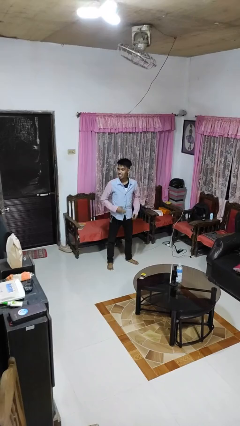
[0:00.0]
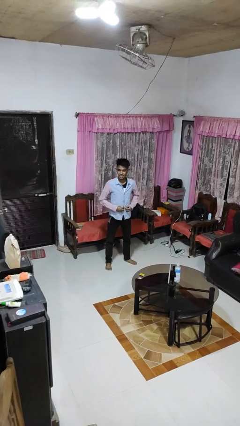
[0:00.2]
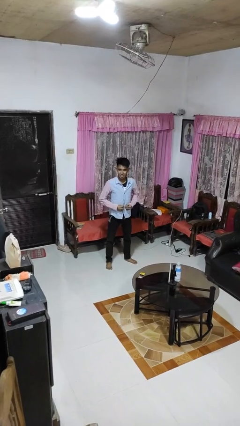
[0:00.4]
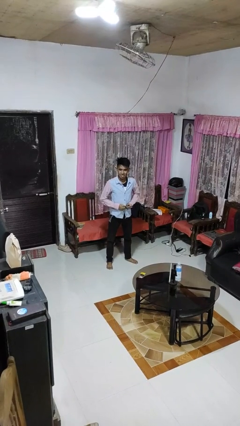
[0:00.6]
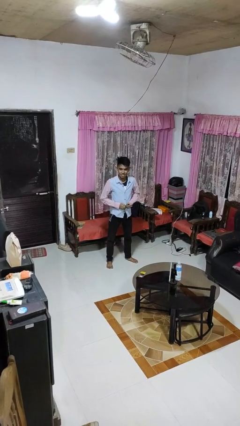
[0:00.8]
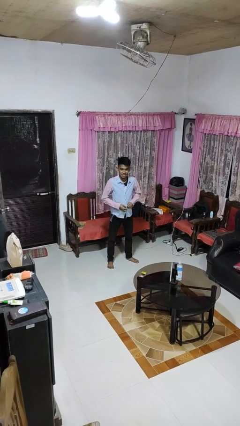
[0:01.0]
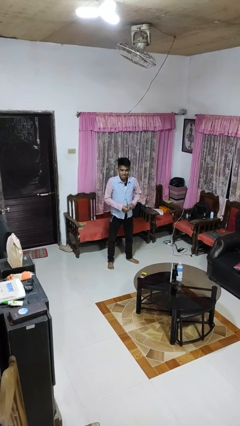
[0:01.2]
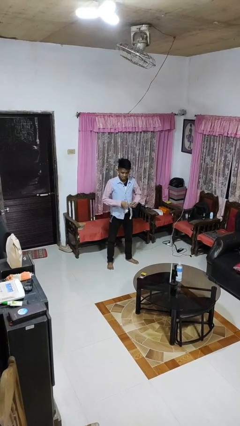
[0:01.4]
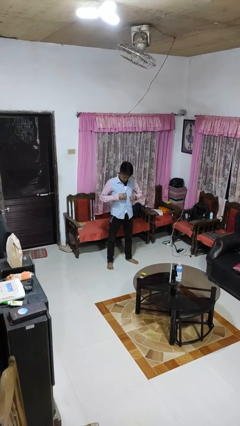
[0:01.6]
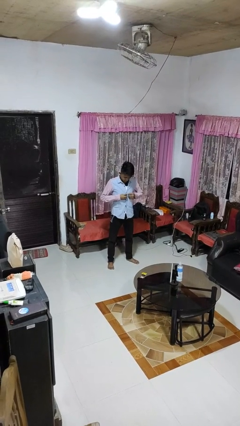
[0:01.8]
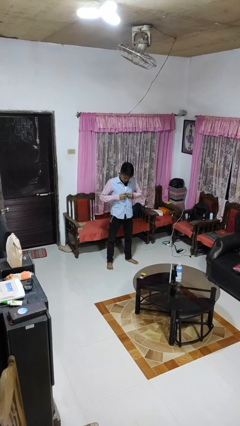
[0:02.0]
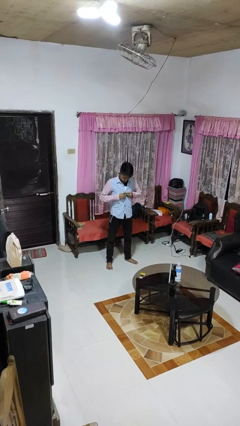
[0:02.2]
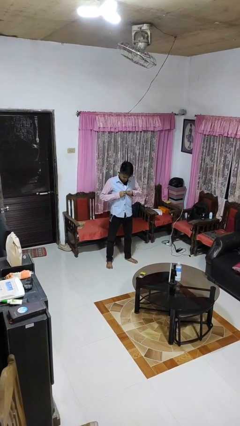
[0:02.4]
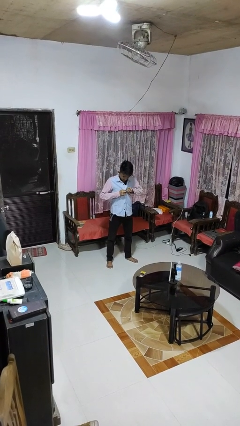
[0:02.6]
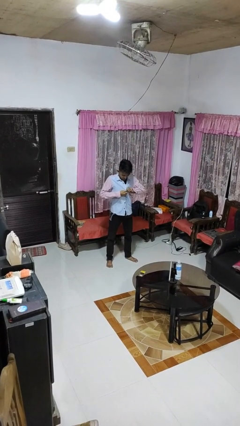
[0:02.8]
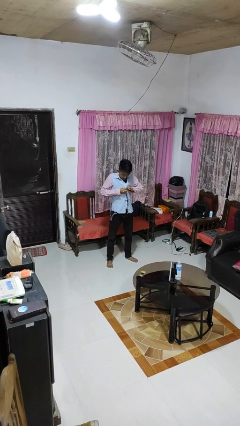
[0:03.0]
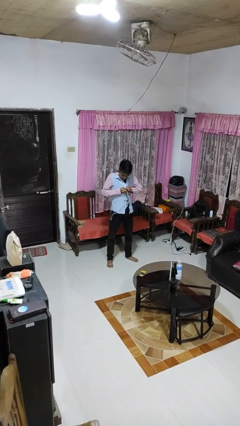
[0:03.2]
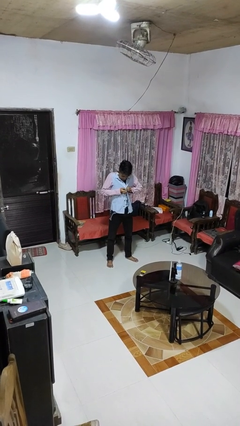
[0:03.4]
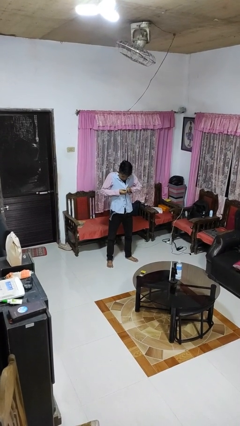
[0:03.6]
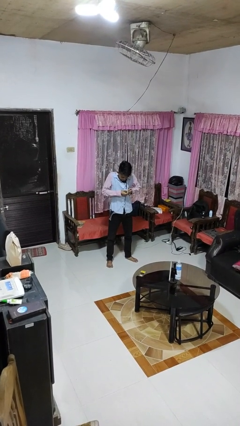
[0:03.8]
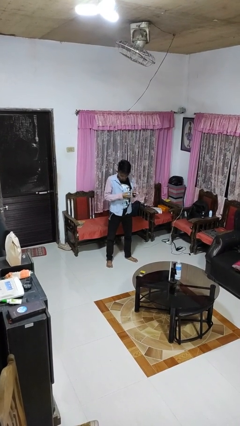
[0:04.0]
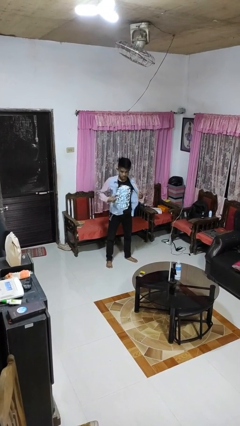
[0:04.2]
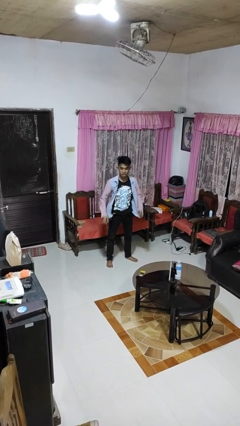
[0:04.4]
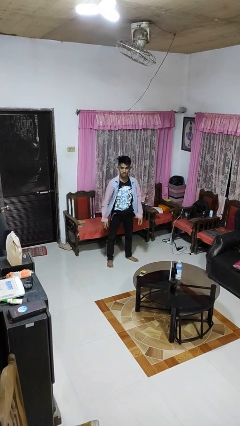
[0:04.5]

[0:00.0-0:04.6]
person unbuttons shirt

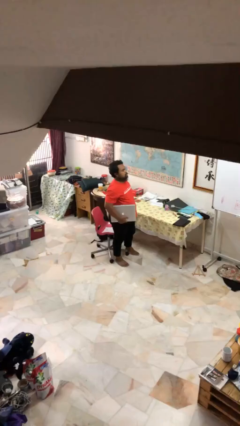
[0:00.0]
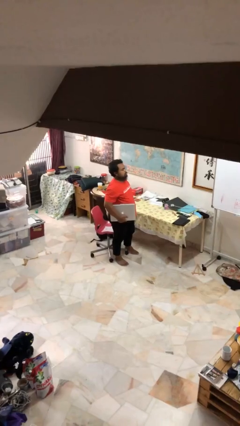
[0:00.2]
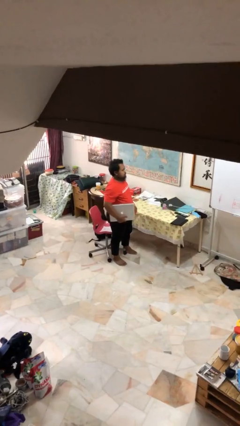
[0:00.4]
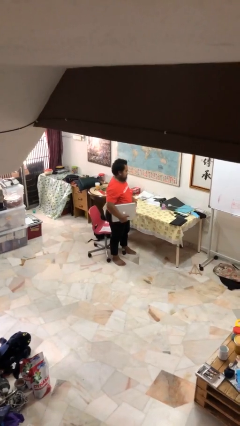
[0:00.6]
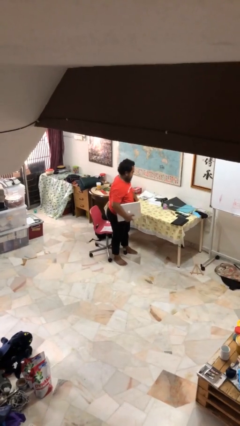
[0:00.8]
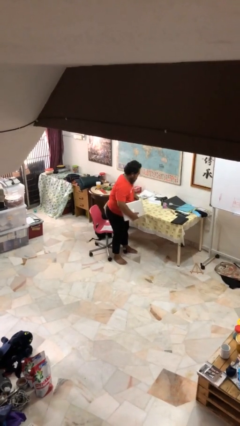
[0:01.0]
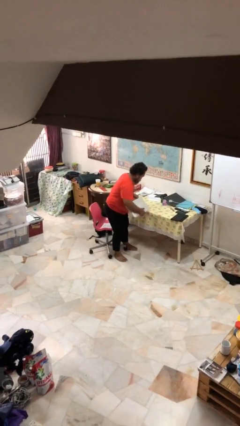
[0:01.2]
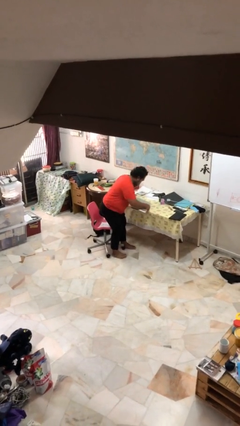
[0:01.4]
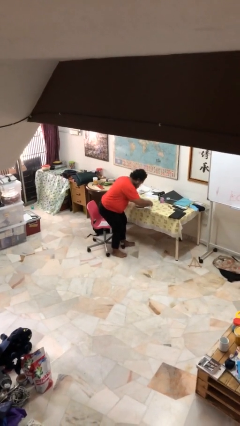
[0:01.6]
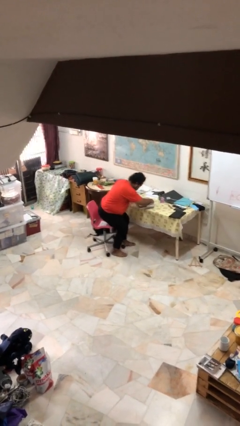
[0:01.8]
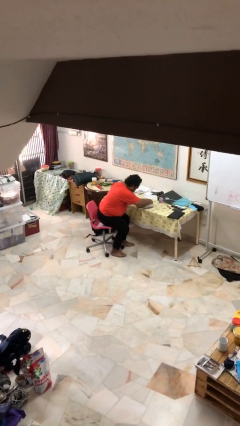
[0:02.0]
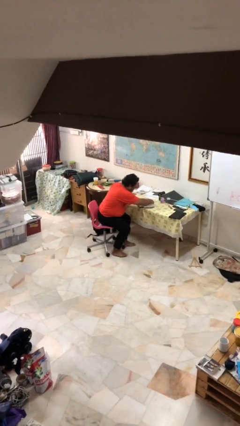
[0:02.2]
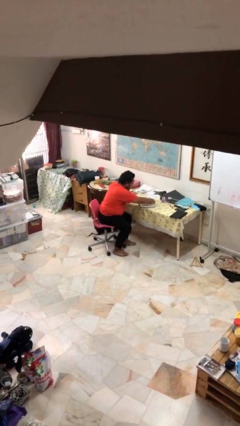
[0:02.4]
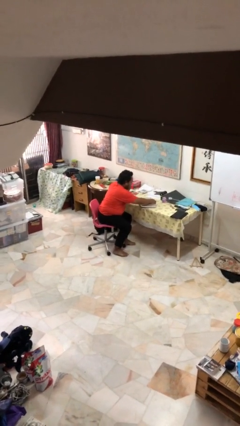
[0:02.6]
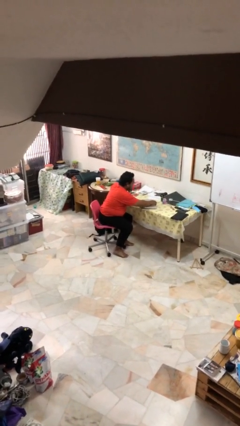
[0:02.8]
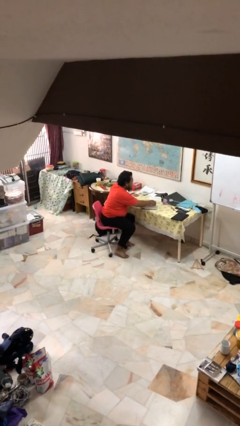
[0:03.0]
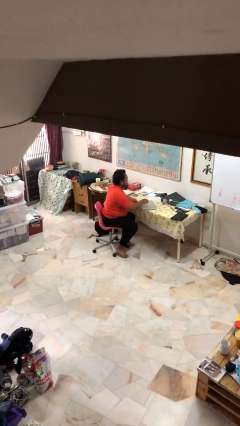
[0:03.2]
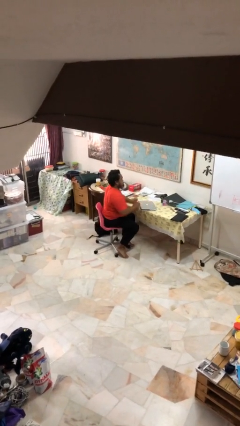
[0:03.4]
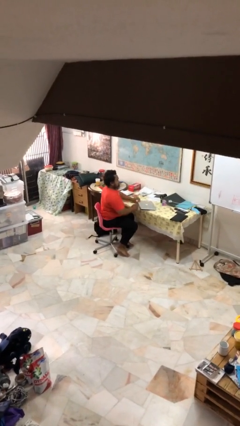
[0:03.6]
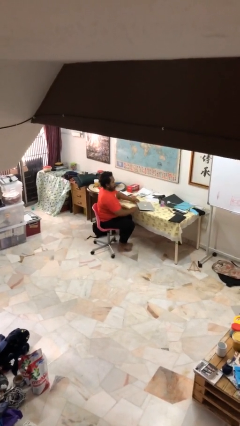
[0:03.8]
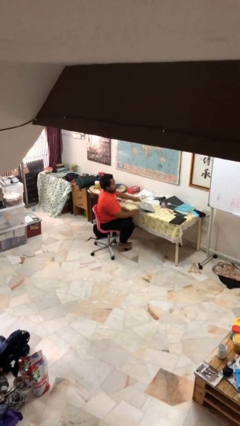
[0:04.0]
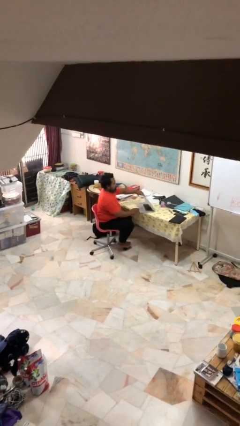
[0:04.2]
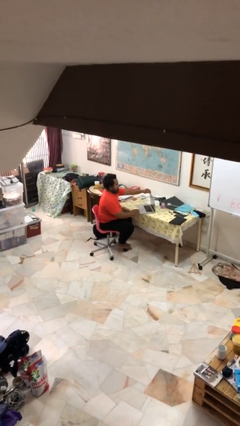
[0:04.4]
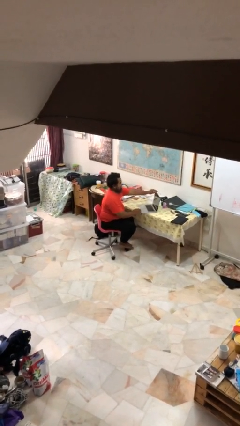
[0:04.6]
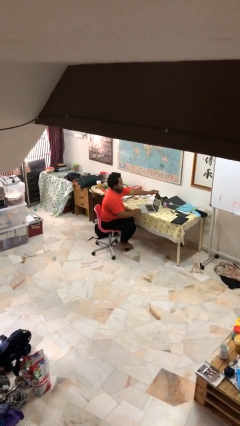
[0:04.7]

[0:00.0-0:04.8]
person sits down

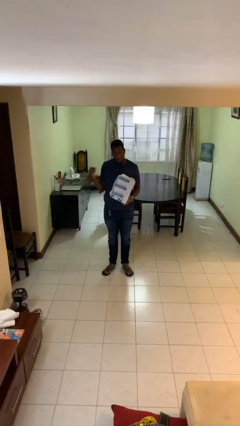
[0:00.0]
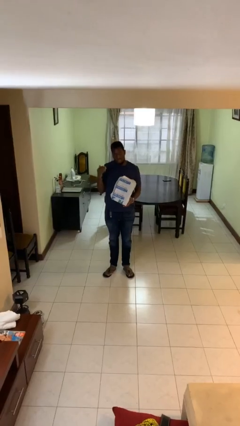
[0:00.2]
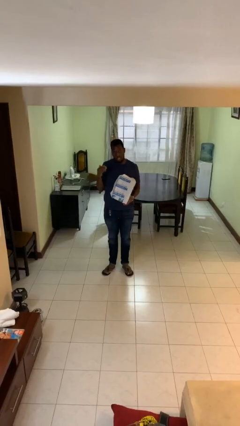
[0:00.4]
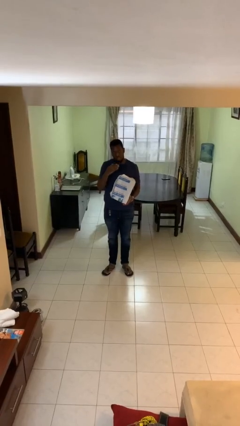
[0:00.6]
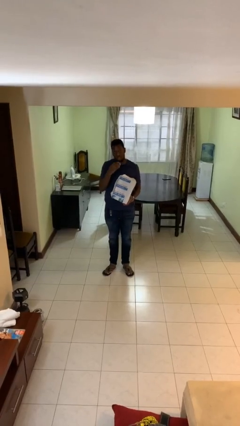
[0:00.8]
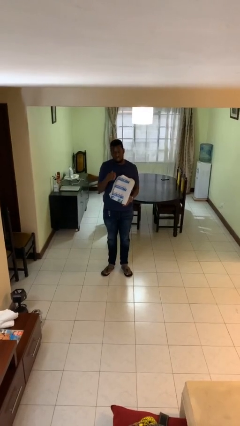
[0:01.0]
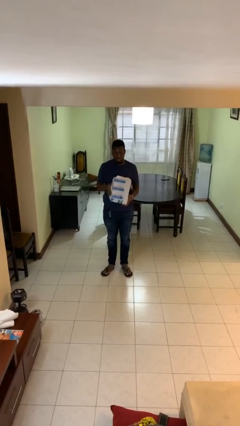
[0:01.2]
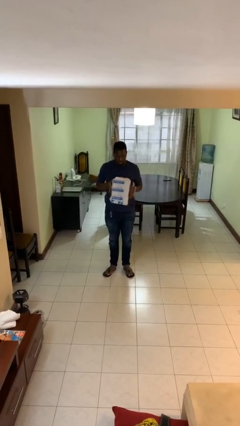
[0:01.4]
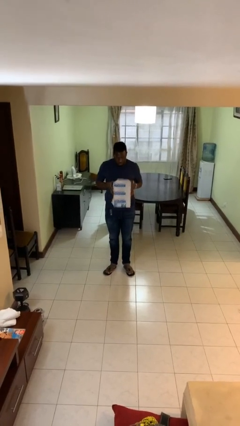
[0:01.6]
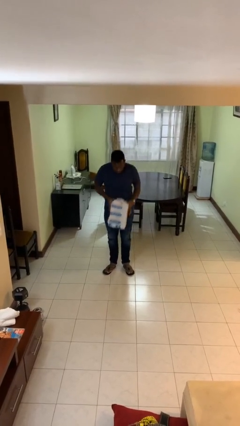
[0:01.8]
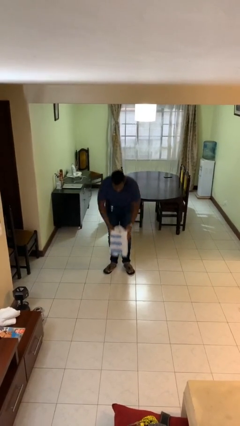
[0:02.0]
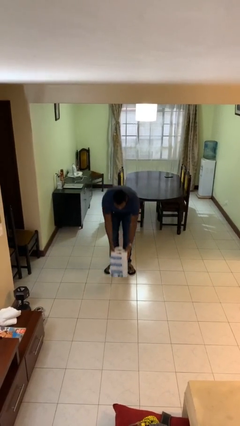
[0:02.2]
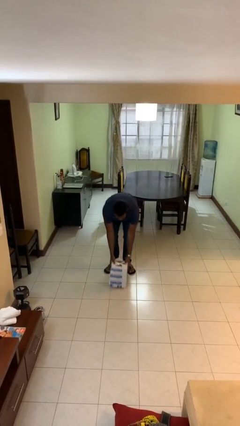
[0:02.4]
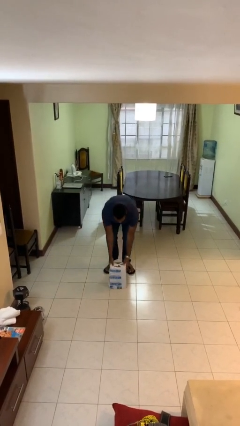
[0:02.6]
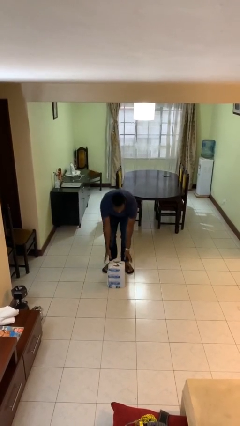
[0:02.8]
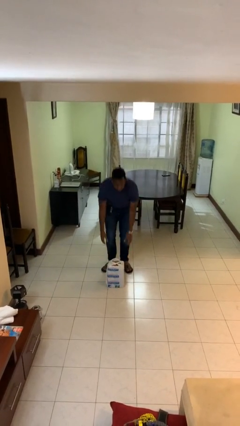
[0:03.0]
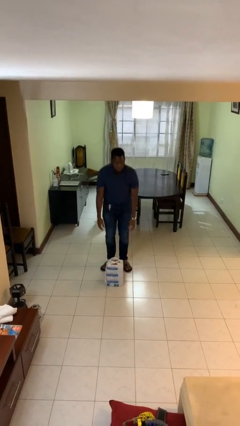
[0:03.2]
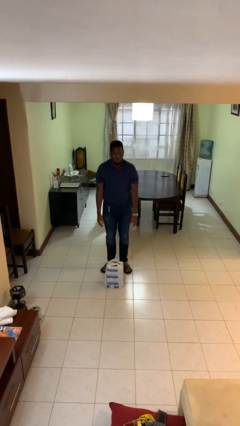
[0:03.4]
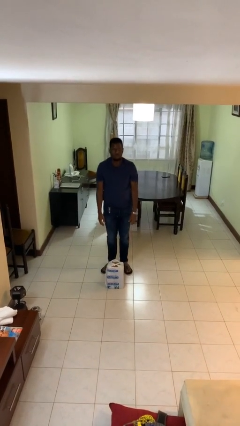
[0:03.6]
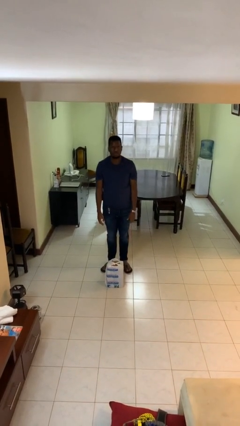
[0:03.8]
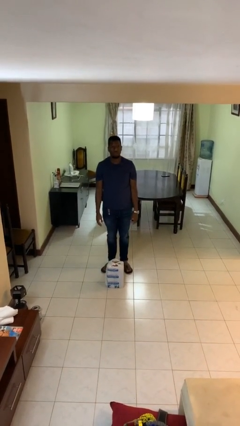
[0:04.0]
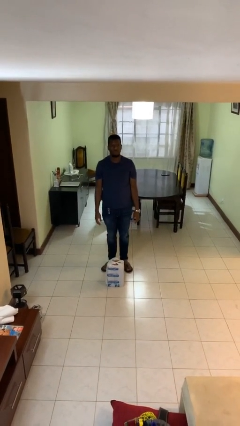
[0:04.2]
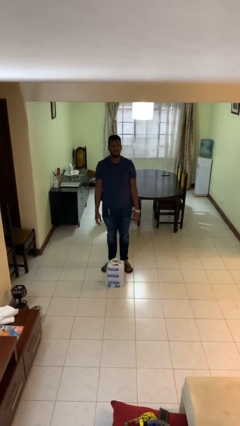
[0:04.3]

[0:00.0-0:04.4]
person puts down object on floor

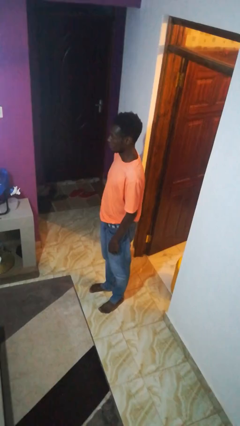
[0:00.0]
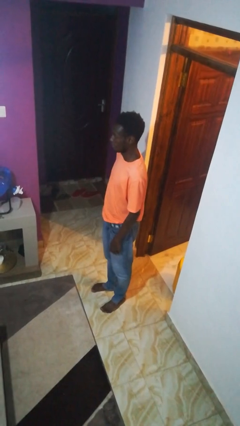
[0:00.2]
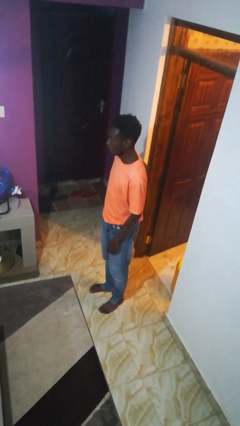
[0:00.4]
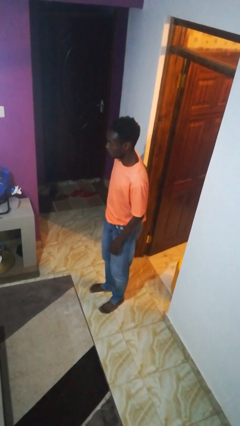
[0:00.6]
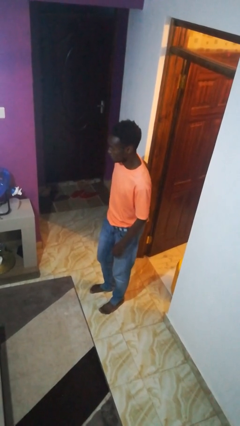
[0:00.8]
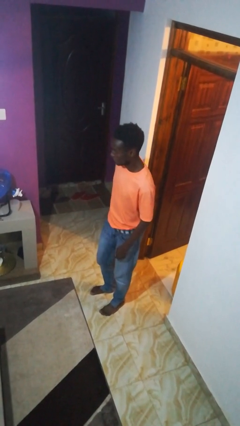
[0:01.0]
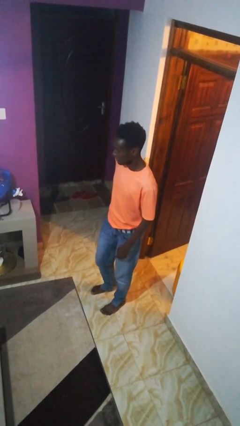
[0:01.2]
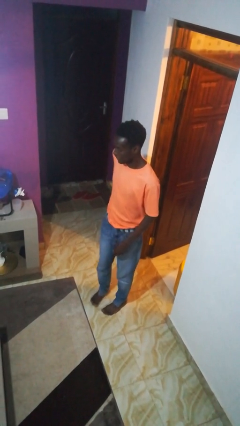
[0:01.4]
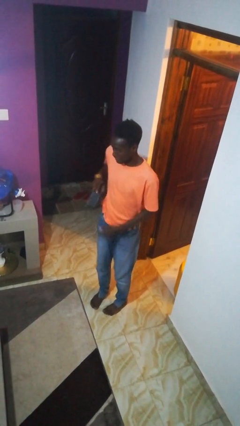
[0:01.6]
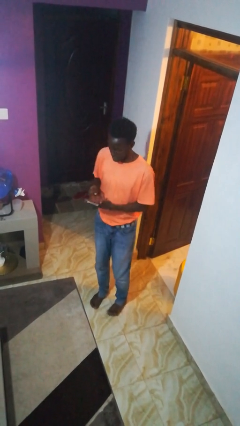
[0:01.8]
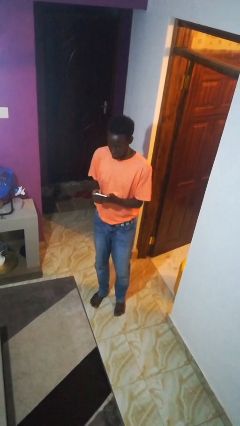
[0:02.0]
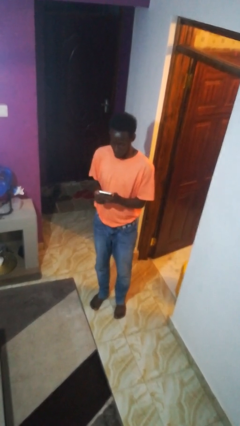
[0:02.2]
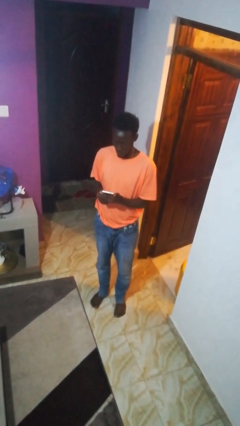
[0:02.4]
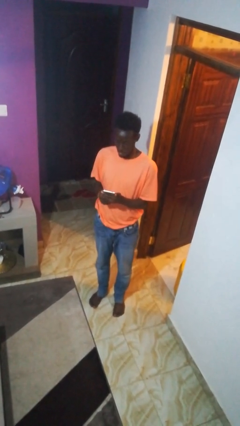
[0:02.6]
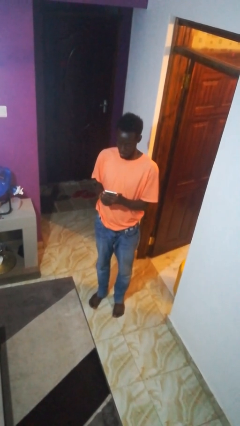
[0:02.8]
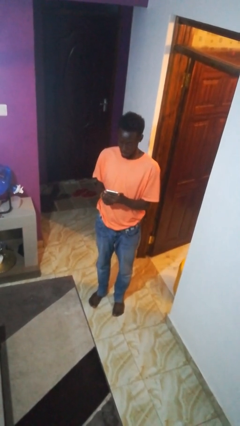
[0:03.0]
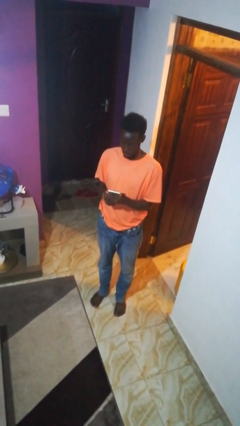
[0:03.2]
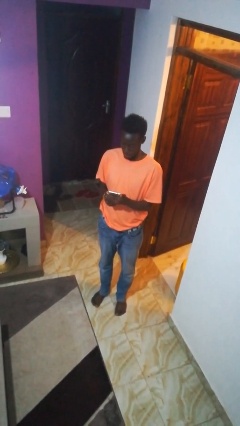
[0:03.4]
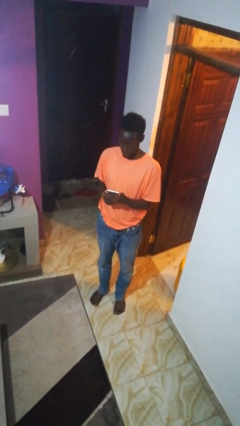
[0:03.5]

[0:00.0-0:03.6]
person takes phone from pocket

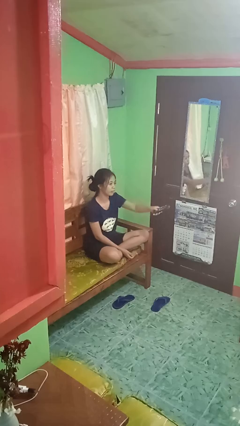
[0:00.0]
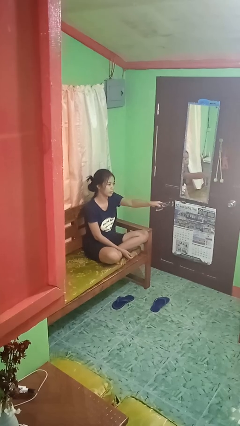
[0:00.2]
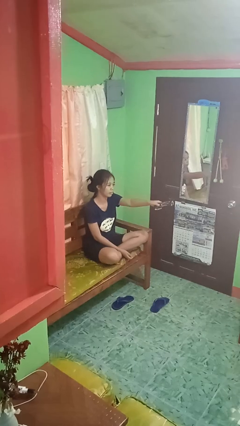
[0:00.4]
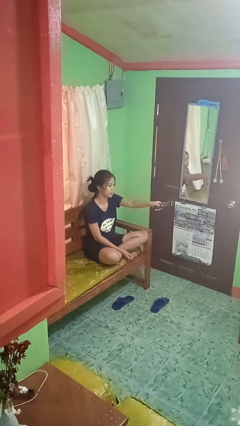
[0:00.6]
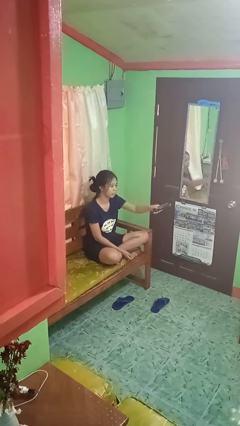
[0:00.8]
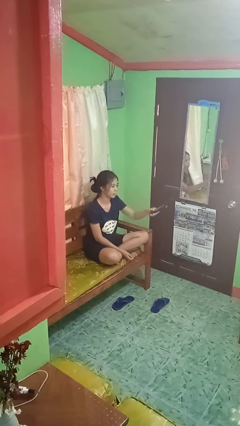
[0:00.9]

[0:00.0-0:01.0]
person uses television remote
